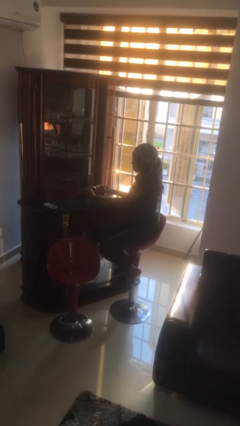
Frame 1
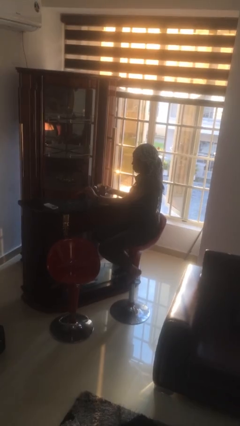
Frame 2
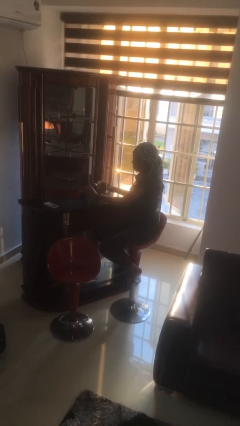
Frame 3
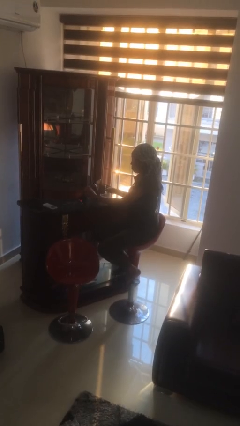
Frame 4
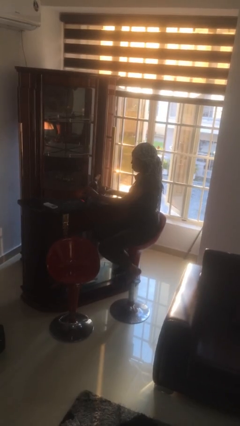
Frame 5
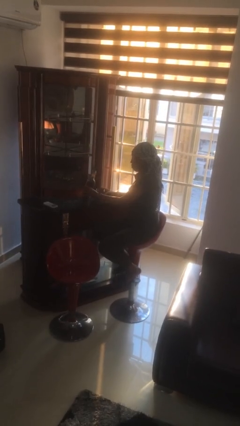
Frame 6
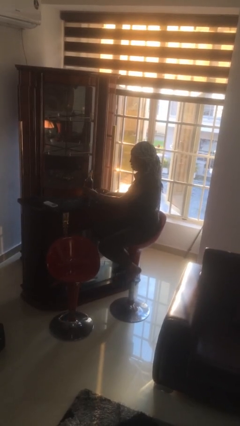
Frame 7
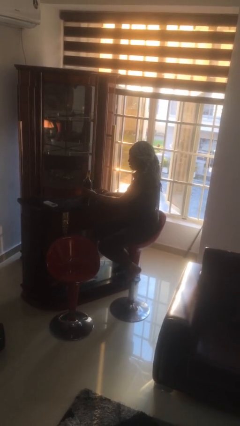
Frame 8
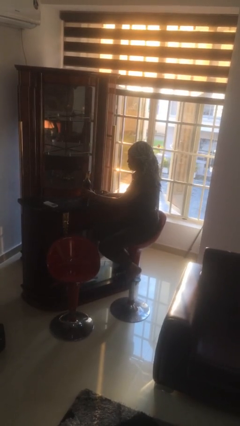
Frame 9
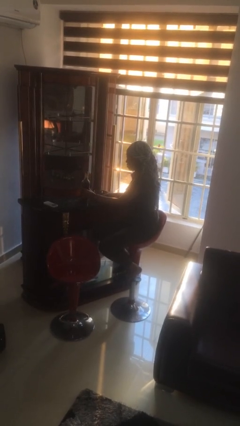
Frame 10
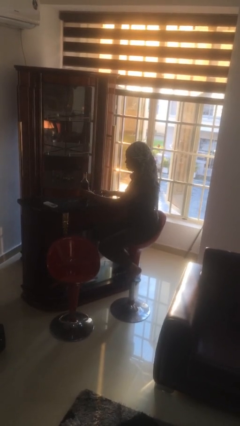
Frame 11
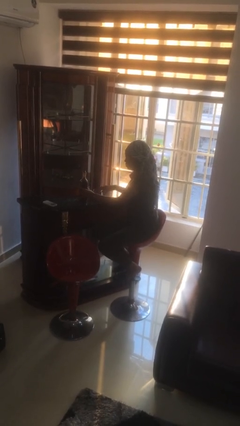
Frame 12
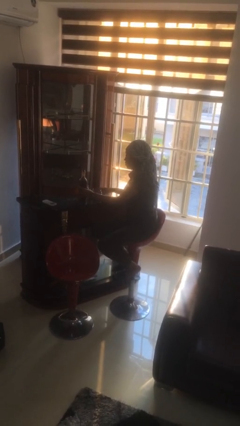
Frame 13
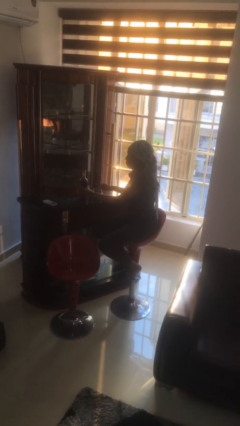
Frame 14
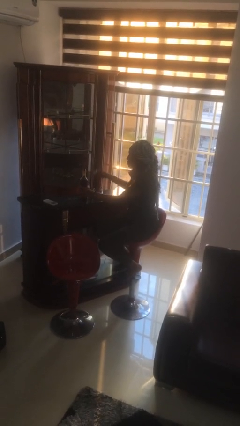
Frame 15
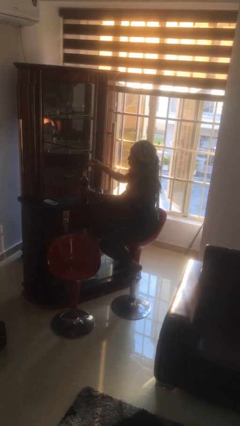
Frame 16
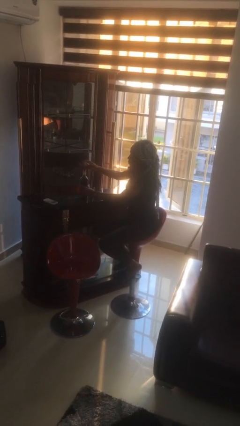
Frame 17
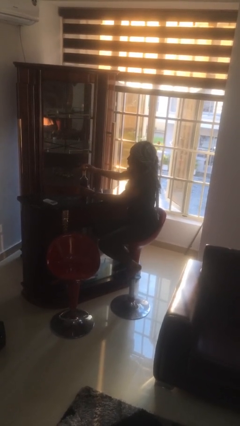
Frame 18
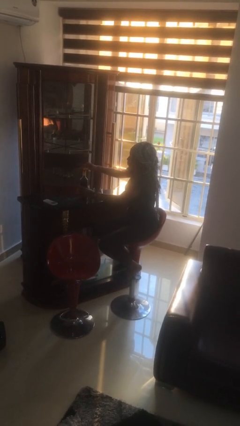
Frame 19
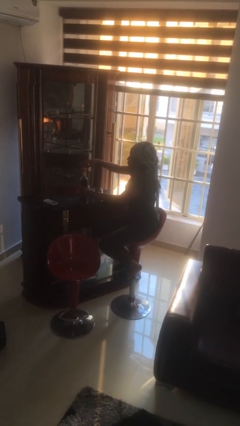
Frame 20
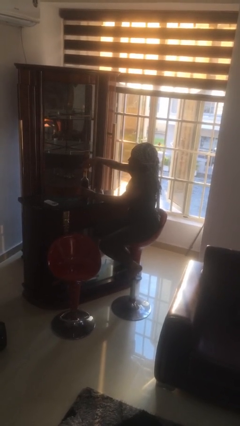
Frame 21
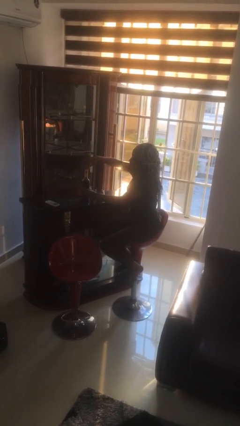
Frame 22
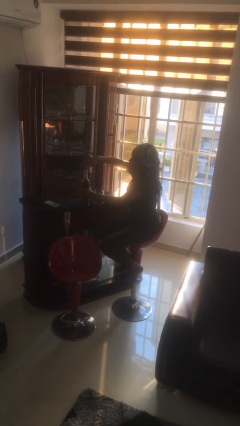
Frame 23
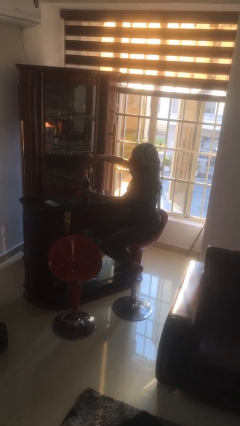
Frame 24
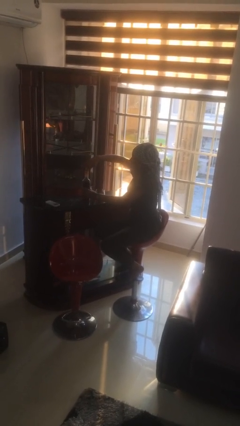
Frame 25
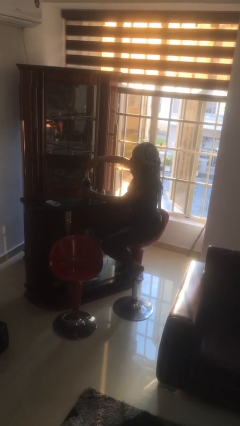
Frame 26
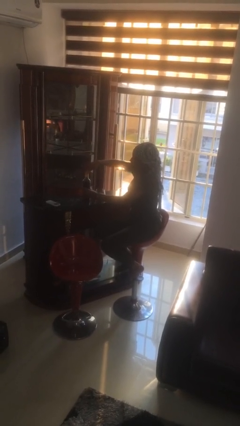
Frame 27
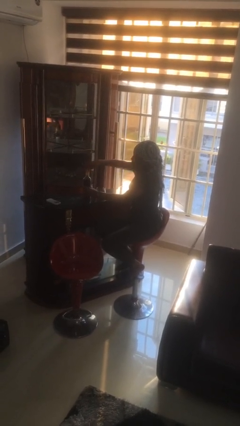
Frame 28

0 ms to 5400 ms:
person screws lid to bottle

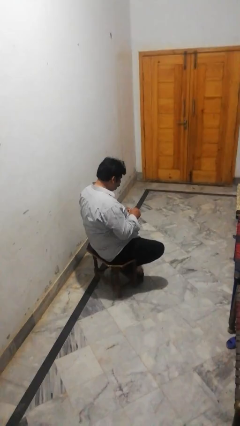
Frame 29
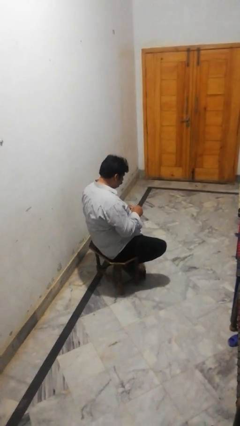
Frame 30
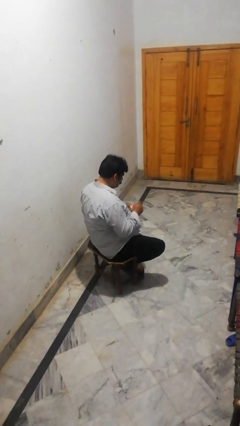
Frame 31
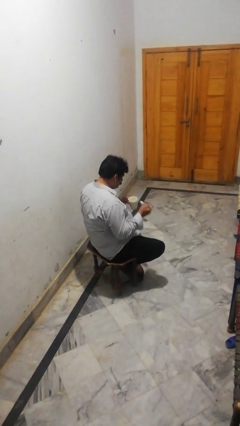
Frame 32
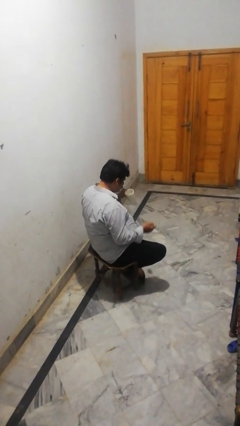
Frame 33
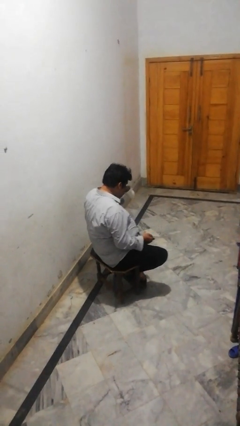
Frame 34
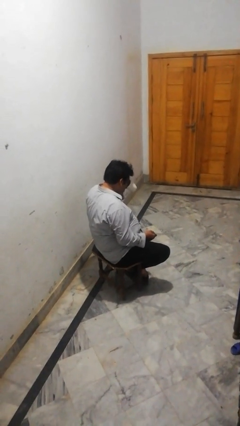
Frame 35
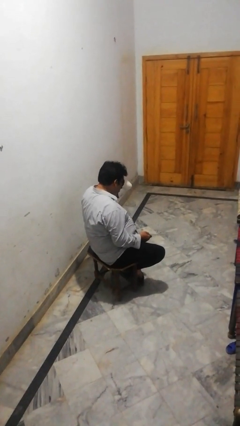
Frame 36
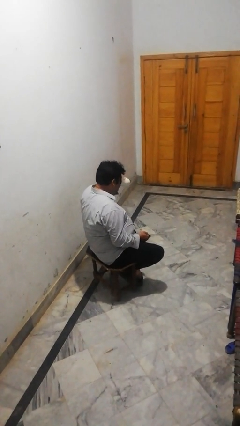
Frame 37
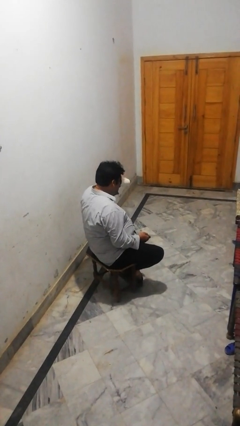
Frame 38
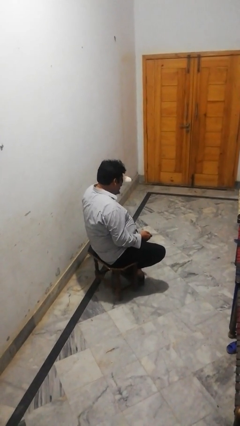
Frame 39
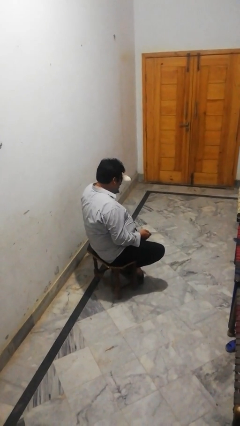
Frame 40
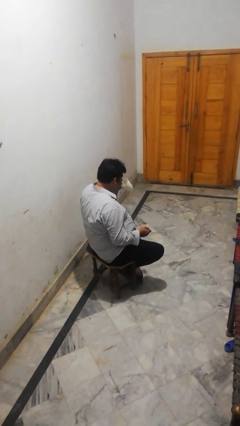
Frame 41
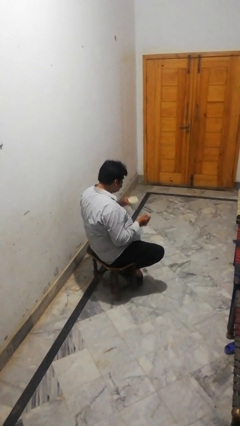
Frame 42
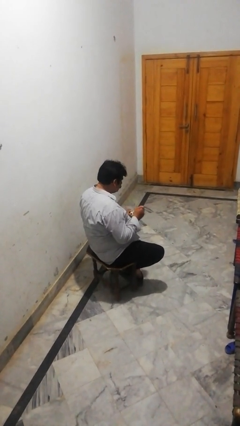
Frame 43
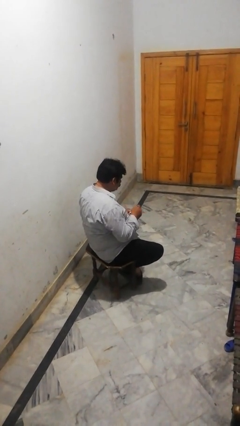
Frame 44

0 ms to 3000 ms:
person drinks from mug

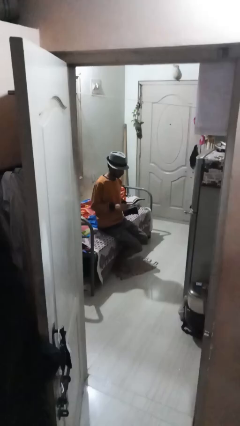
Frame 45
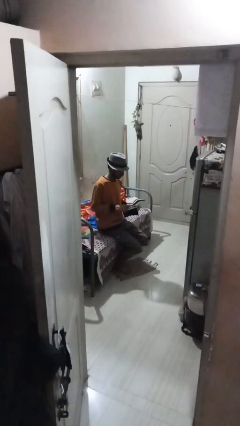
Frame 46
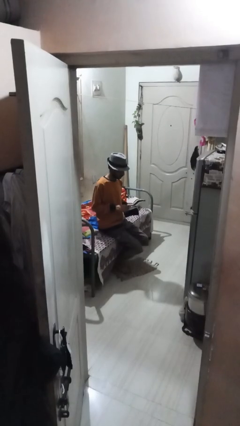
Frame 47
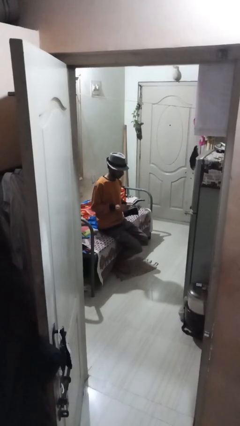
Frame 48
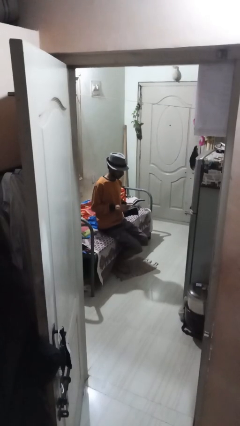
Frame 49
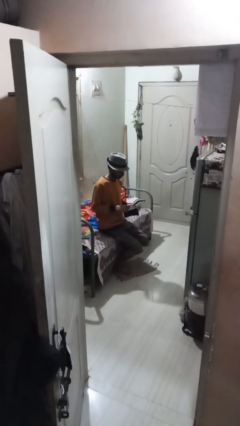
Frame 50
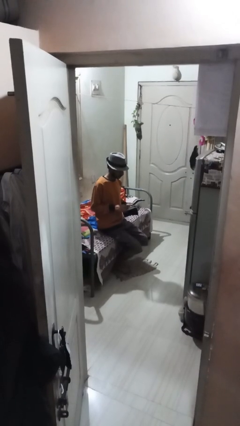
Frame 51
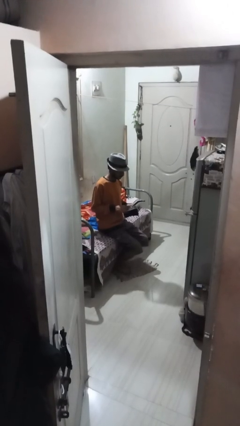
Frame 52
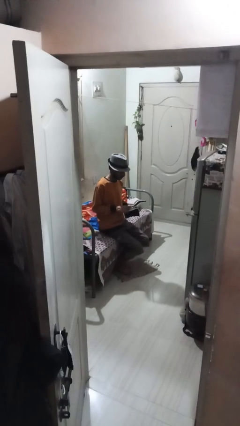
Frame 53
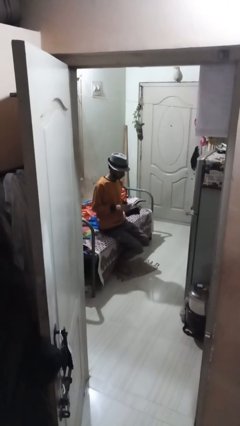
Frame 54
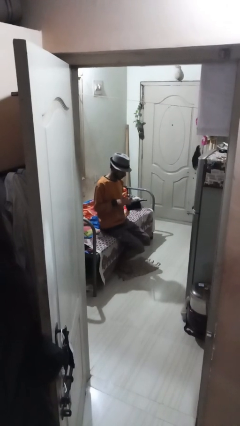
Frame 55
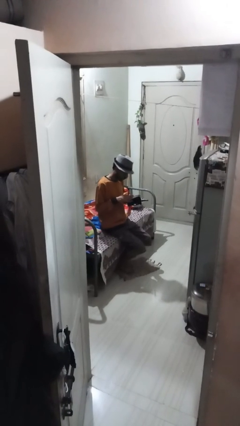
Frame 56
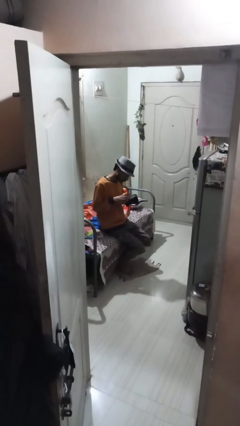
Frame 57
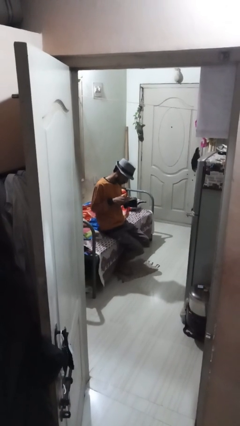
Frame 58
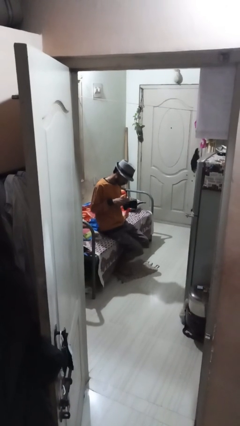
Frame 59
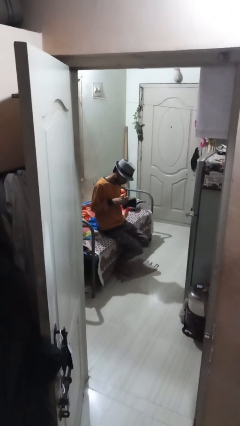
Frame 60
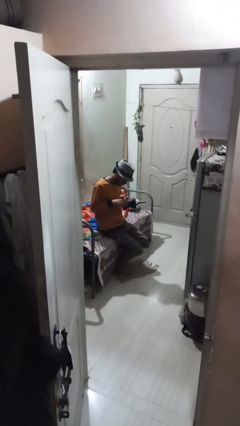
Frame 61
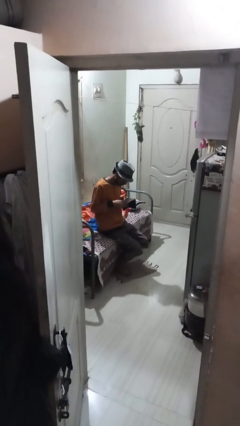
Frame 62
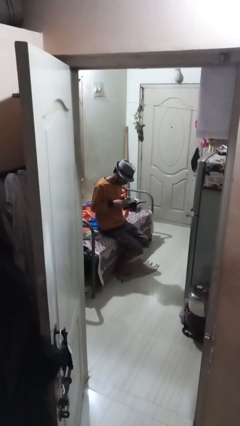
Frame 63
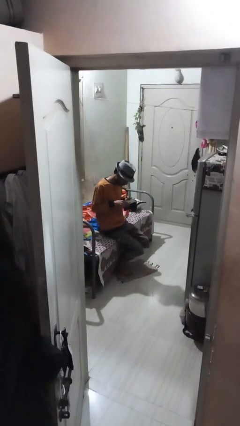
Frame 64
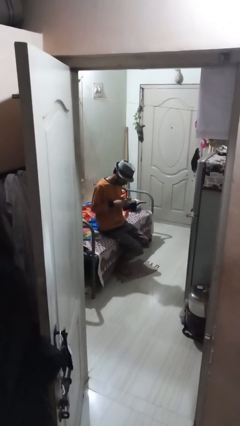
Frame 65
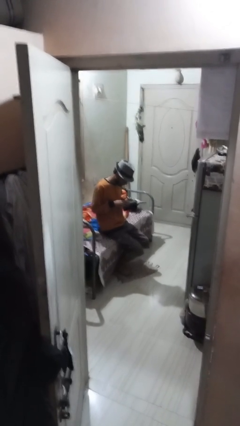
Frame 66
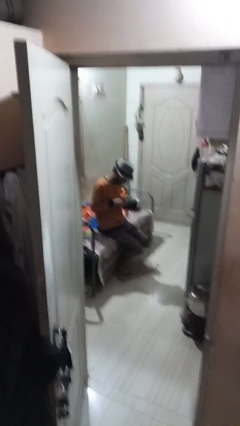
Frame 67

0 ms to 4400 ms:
person searches in purse

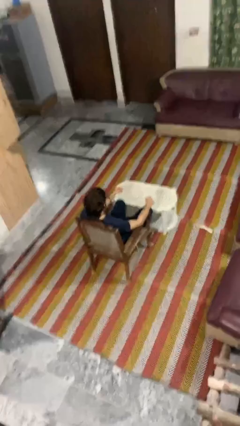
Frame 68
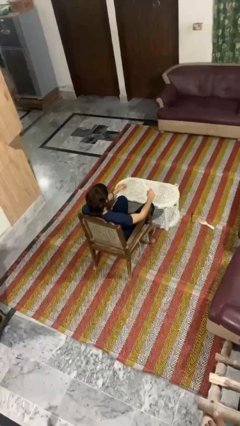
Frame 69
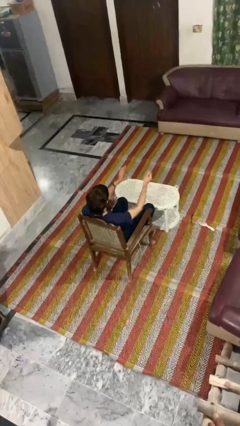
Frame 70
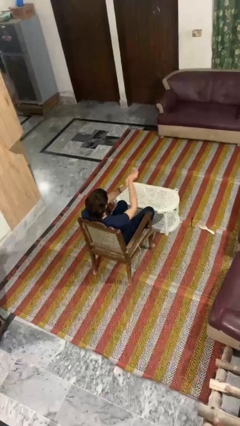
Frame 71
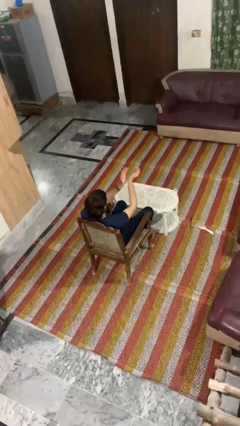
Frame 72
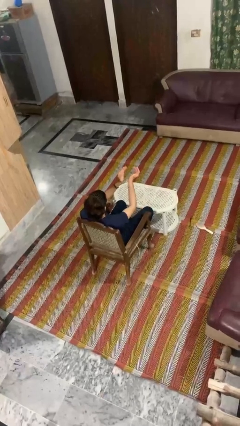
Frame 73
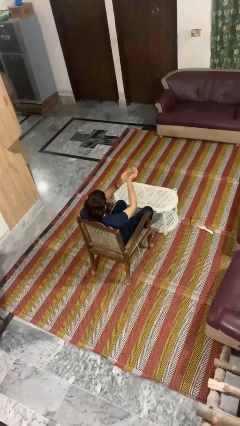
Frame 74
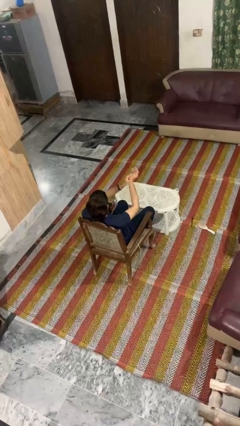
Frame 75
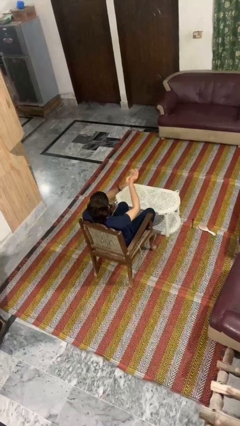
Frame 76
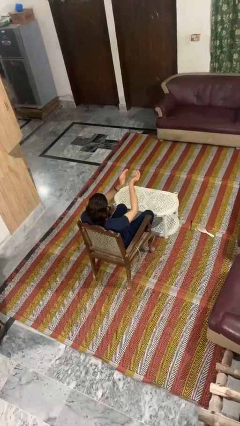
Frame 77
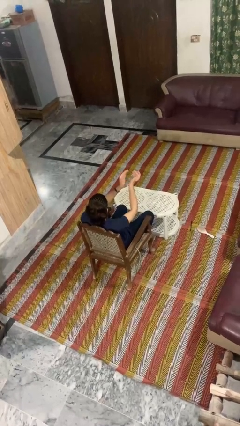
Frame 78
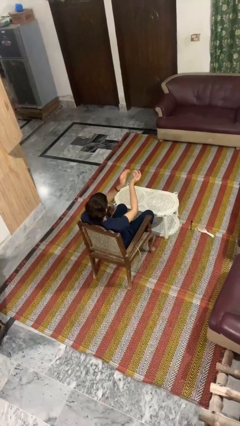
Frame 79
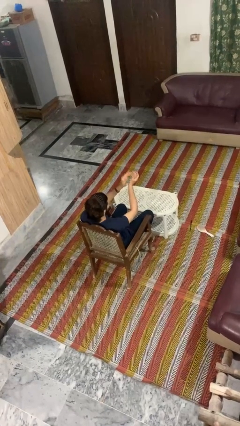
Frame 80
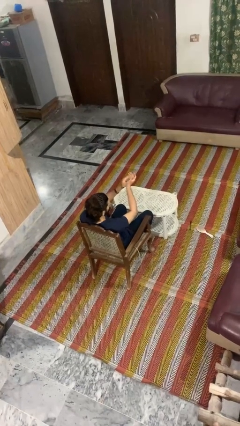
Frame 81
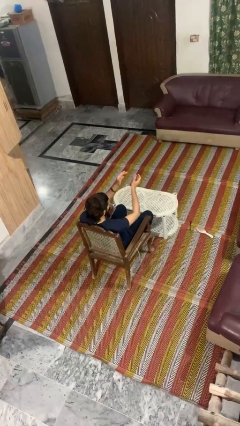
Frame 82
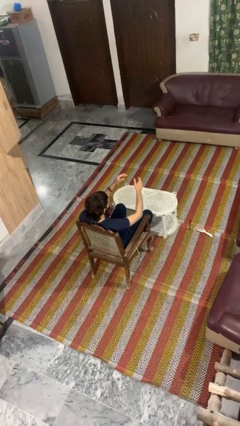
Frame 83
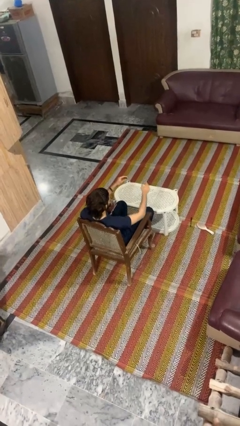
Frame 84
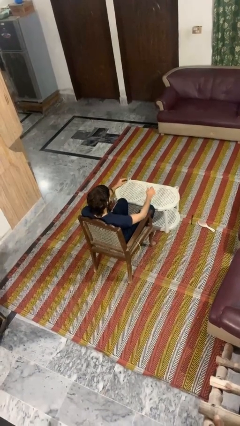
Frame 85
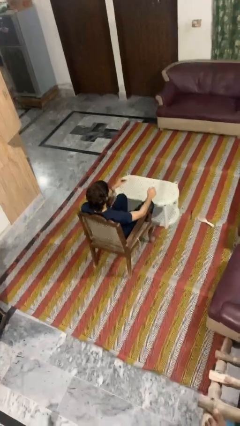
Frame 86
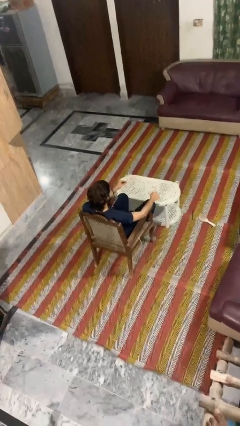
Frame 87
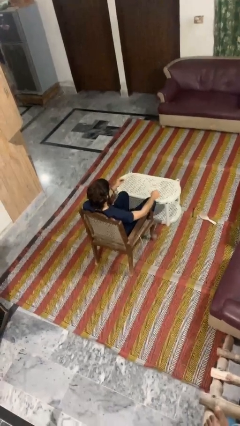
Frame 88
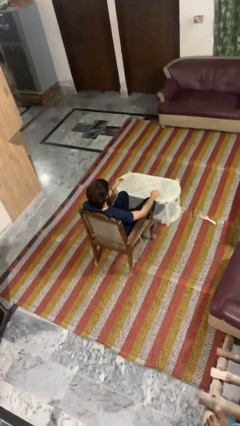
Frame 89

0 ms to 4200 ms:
person claps hands

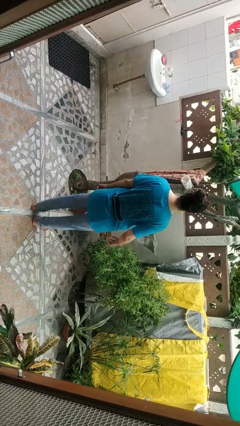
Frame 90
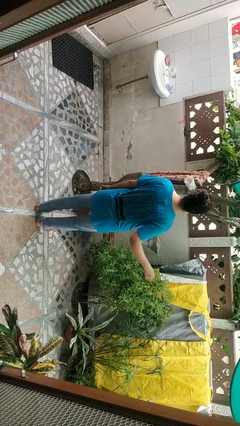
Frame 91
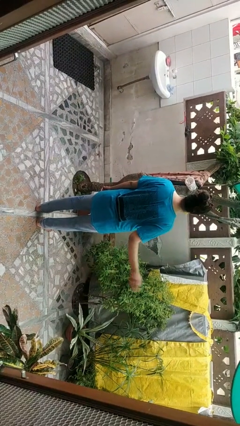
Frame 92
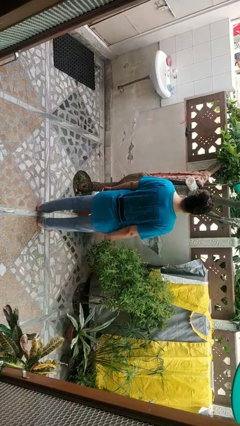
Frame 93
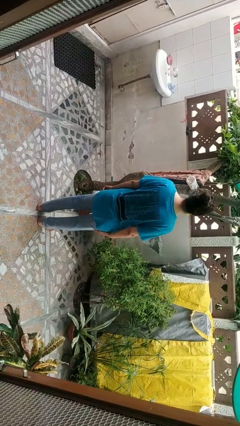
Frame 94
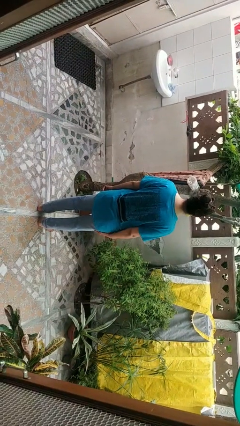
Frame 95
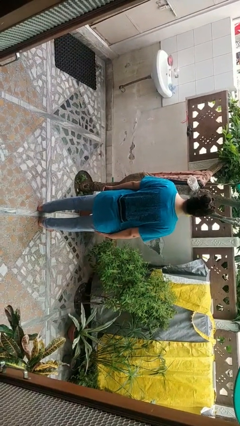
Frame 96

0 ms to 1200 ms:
person slaps hands on thighs
